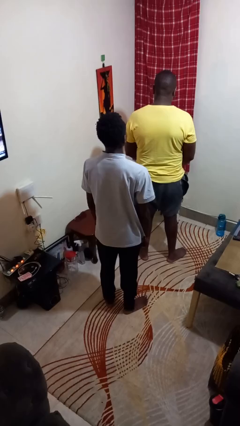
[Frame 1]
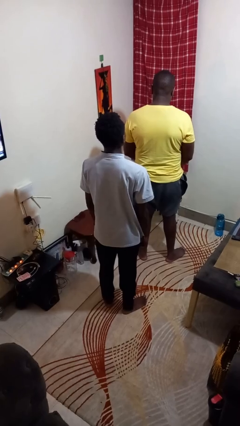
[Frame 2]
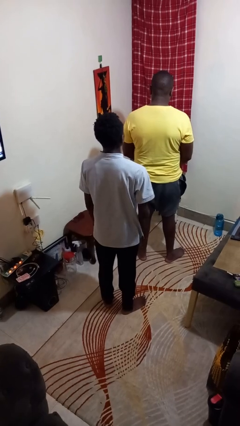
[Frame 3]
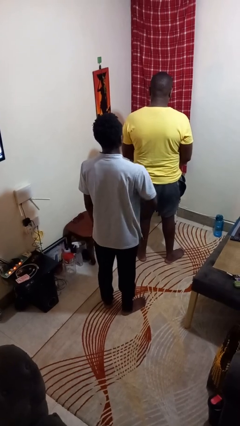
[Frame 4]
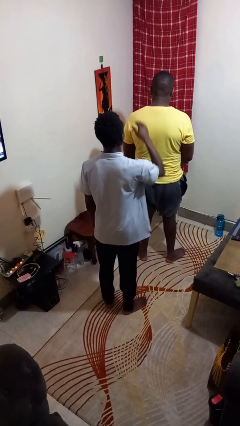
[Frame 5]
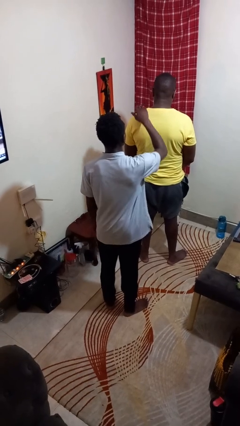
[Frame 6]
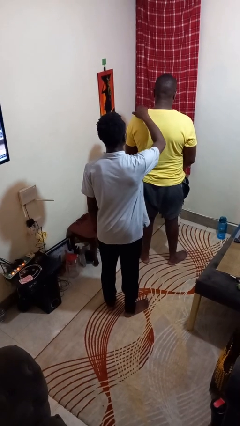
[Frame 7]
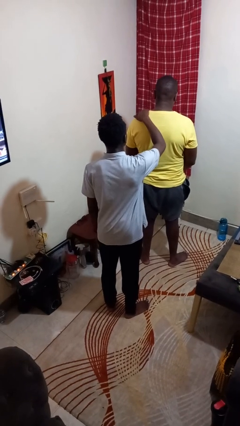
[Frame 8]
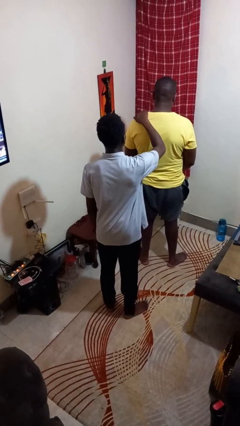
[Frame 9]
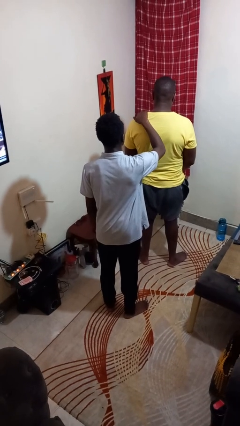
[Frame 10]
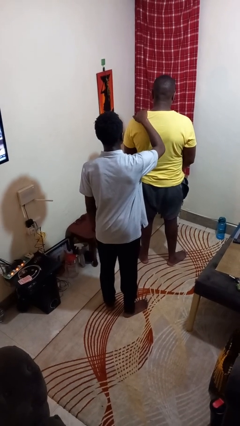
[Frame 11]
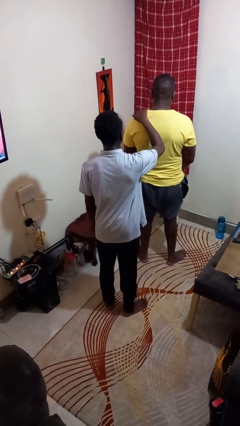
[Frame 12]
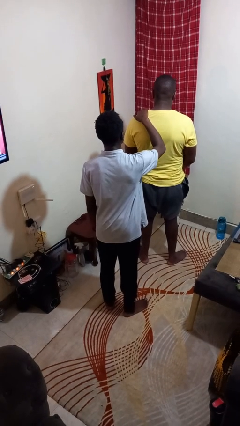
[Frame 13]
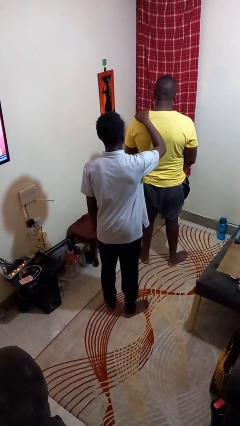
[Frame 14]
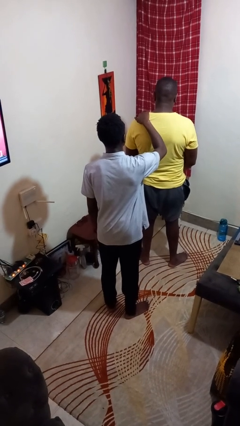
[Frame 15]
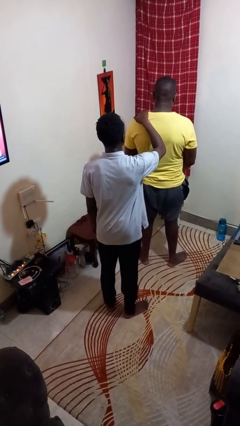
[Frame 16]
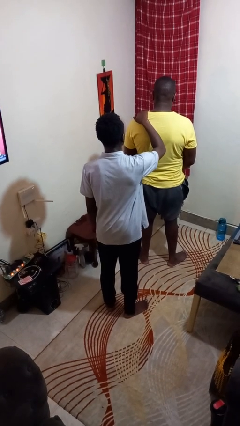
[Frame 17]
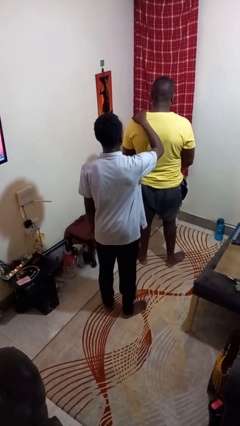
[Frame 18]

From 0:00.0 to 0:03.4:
person touches back of person

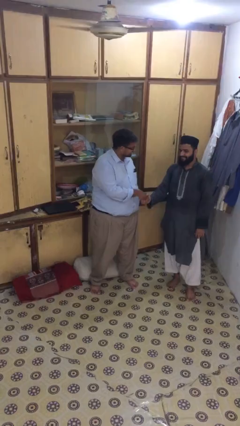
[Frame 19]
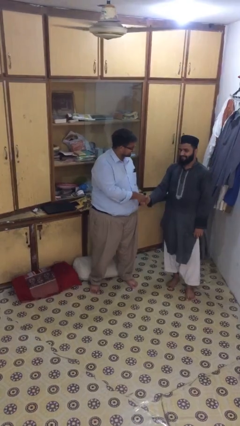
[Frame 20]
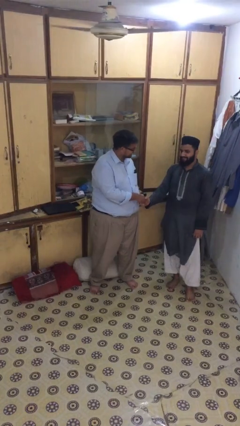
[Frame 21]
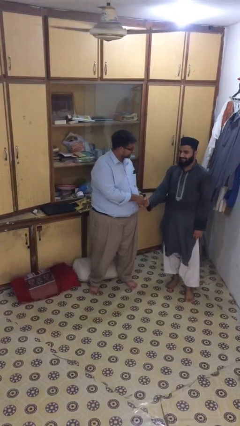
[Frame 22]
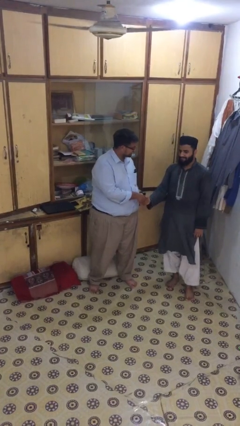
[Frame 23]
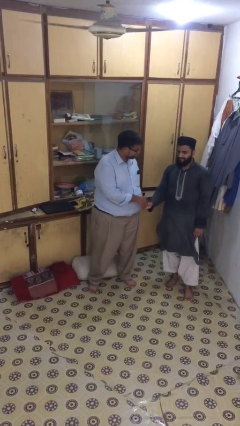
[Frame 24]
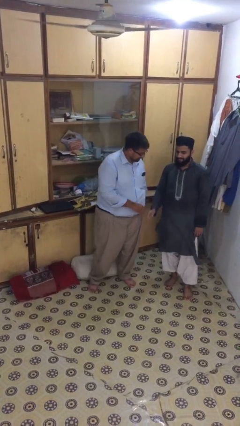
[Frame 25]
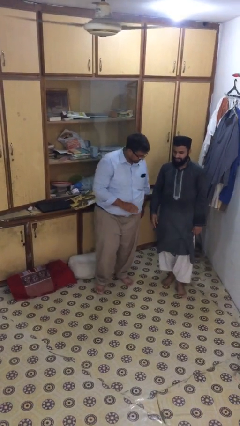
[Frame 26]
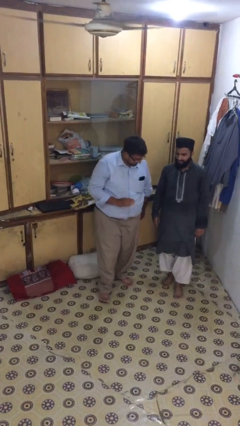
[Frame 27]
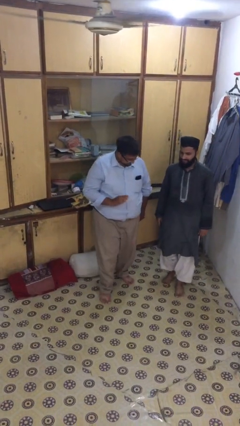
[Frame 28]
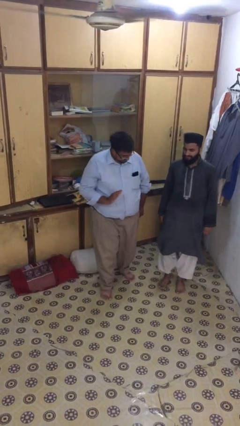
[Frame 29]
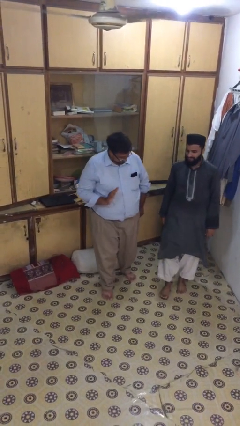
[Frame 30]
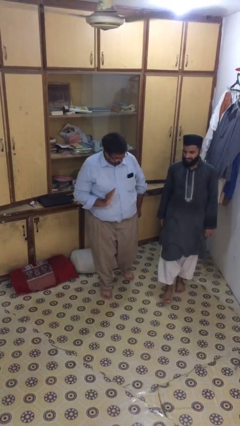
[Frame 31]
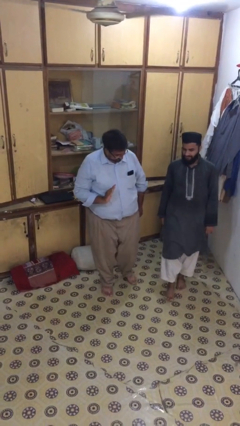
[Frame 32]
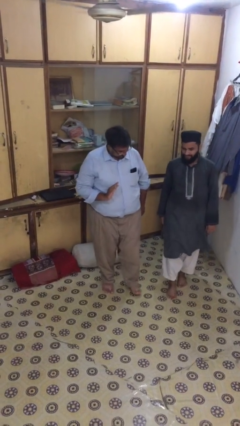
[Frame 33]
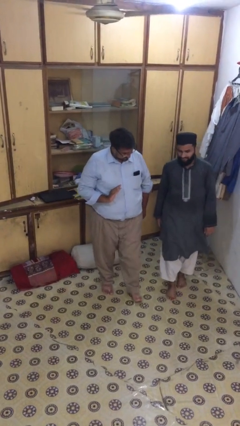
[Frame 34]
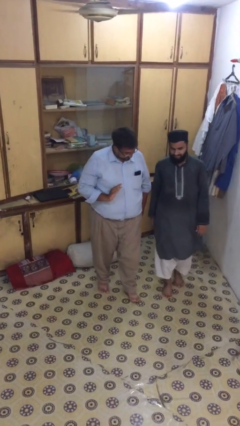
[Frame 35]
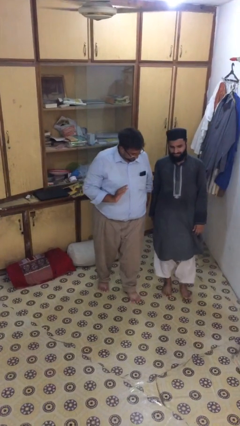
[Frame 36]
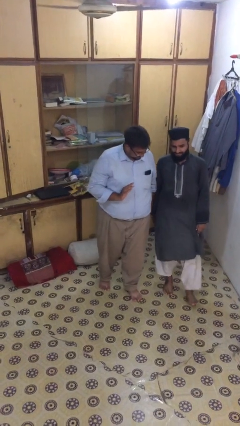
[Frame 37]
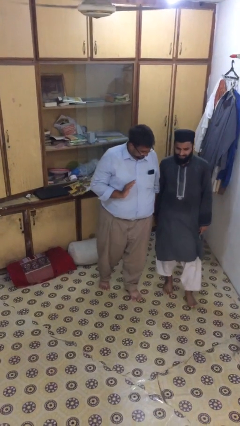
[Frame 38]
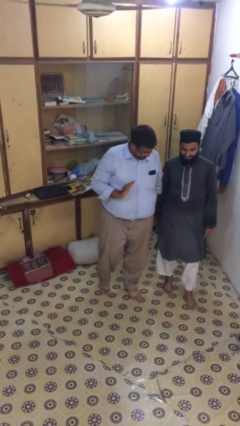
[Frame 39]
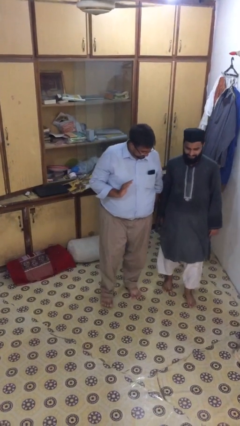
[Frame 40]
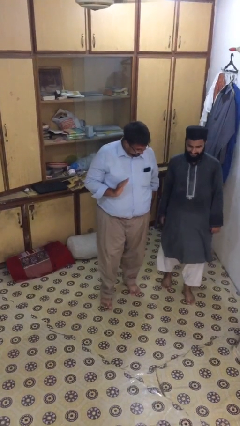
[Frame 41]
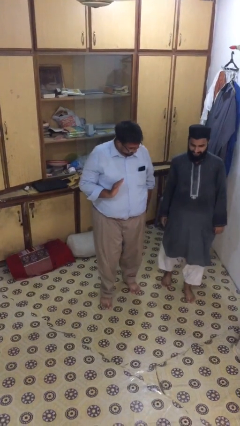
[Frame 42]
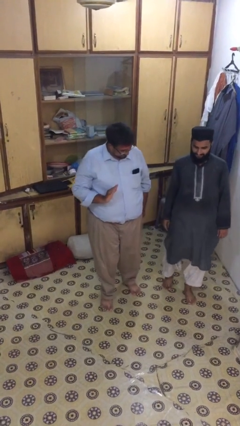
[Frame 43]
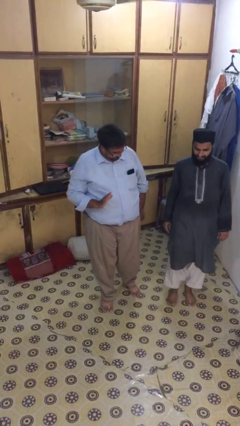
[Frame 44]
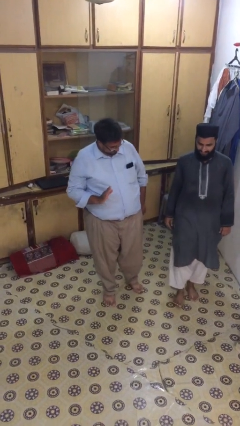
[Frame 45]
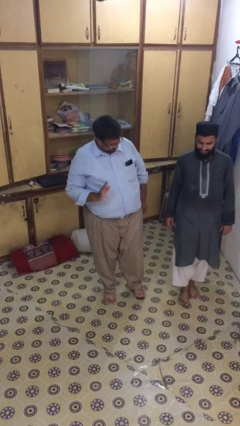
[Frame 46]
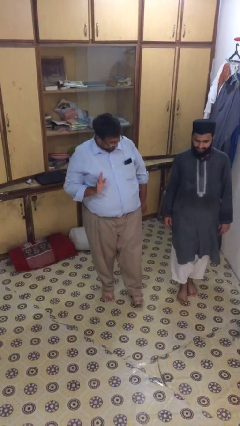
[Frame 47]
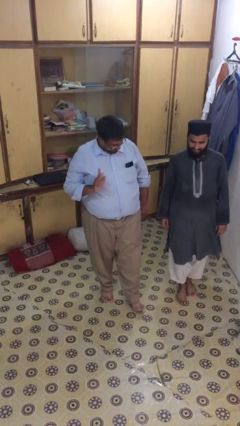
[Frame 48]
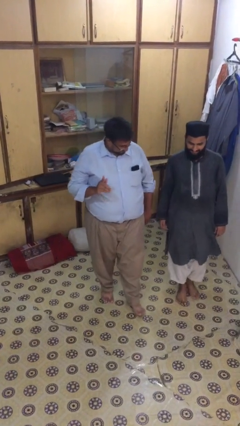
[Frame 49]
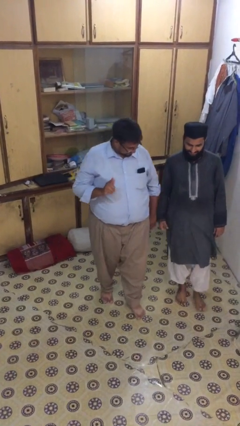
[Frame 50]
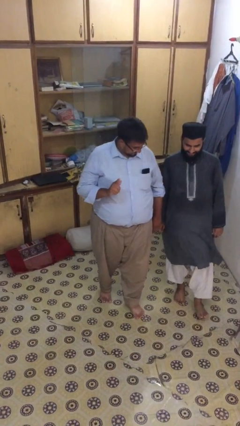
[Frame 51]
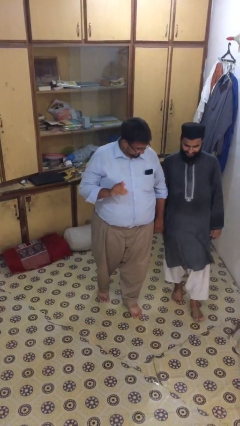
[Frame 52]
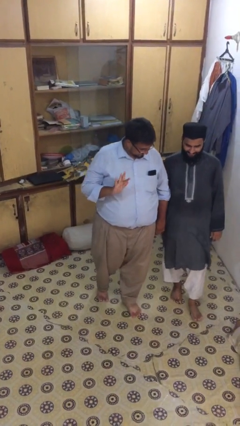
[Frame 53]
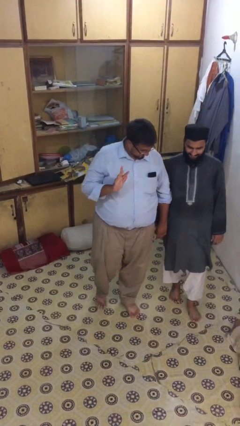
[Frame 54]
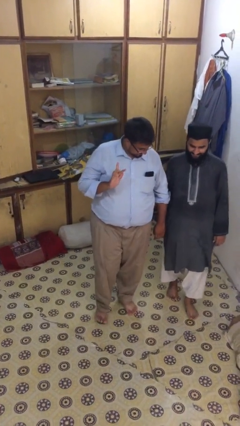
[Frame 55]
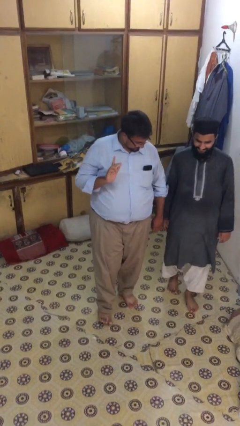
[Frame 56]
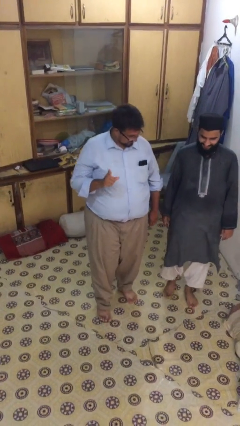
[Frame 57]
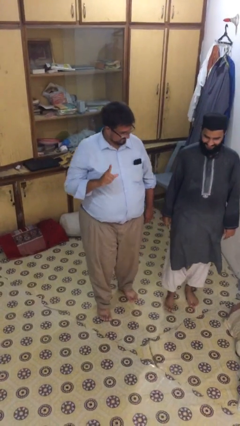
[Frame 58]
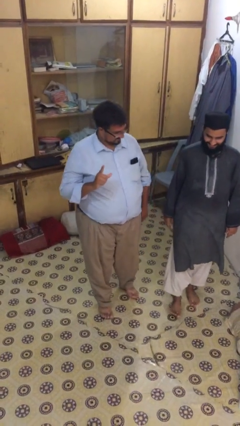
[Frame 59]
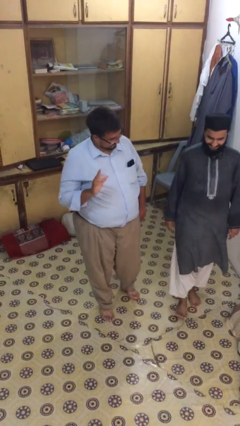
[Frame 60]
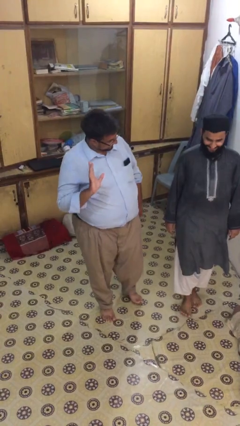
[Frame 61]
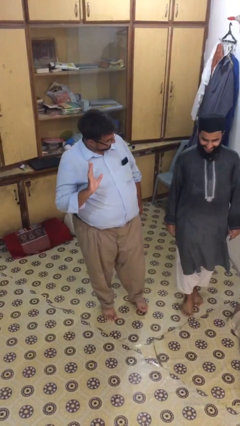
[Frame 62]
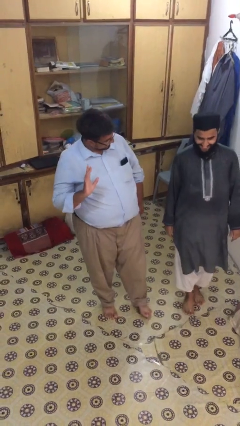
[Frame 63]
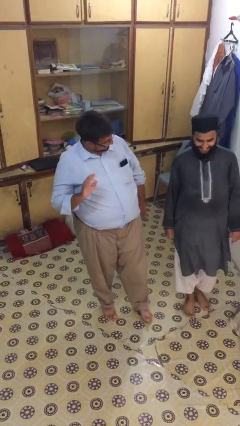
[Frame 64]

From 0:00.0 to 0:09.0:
person talks to person

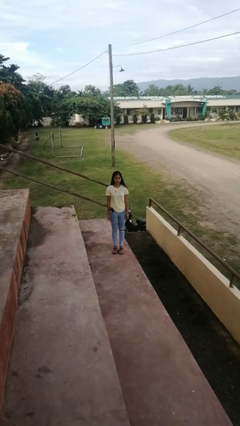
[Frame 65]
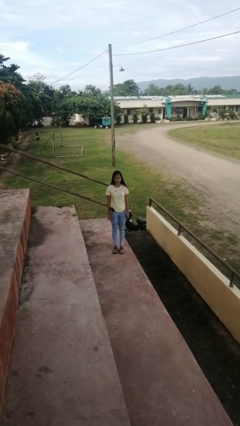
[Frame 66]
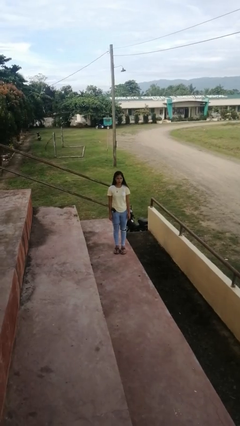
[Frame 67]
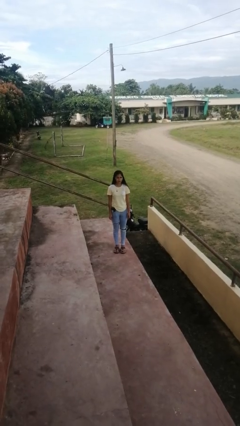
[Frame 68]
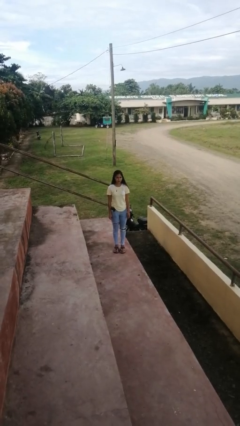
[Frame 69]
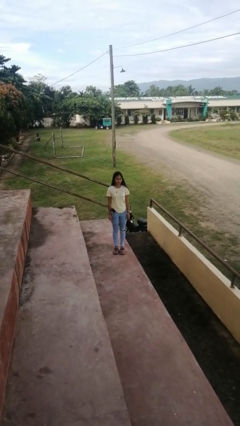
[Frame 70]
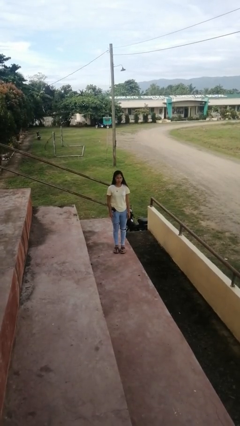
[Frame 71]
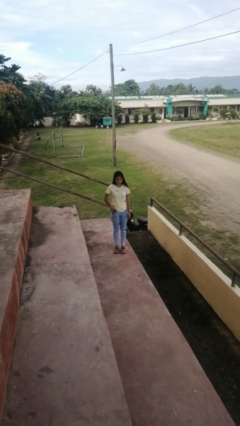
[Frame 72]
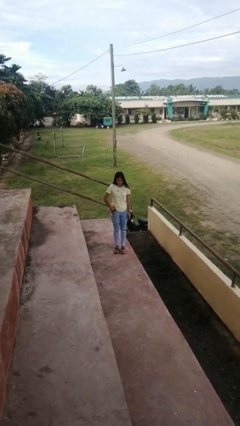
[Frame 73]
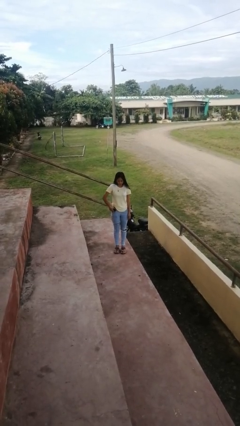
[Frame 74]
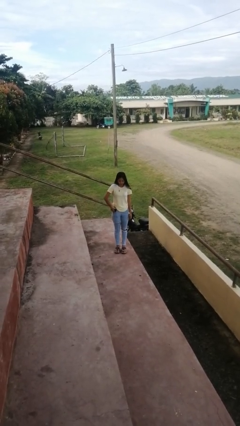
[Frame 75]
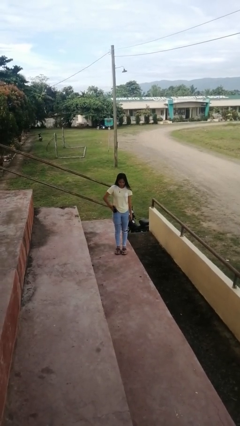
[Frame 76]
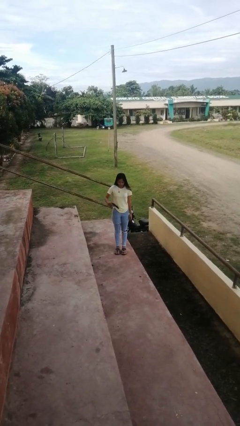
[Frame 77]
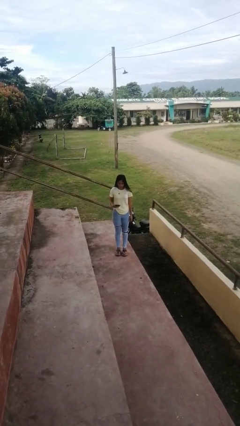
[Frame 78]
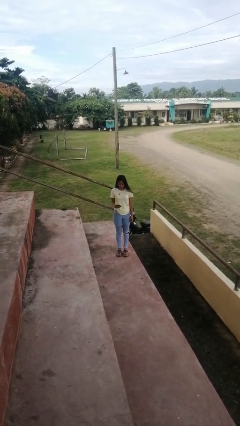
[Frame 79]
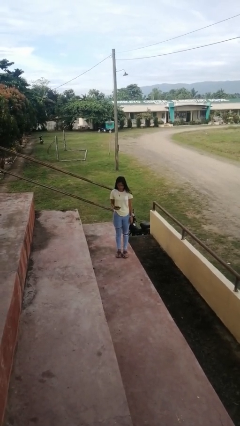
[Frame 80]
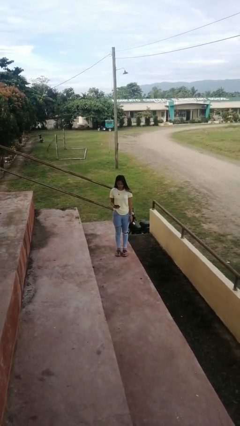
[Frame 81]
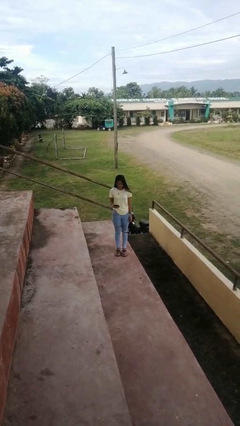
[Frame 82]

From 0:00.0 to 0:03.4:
person takes phone from pocket

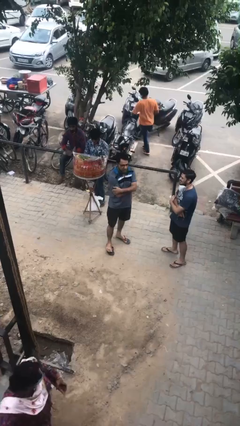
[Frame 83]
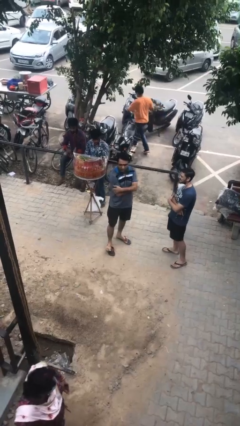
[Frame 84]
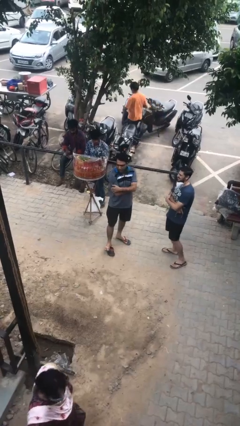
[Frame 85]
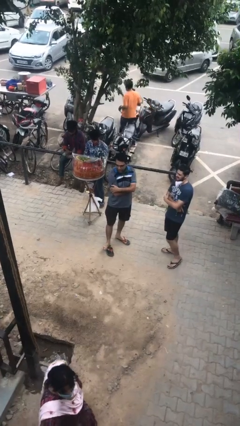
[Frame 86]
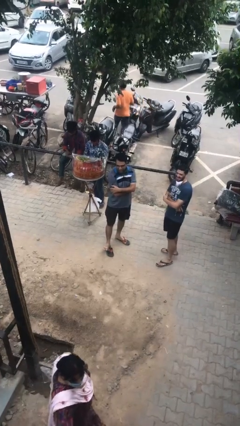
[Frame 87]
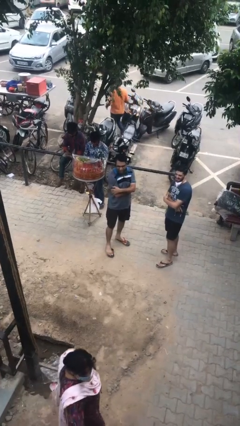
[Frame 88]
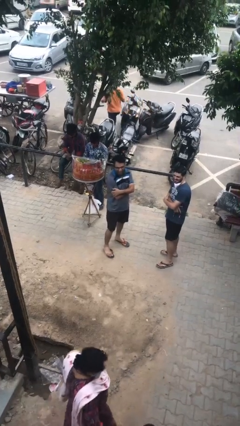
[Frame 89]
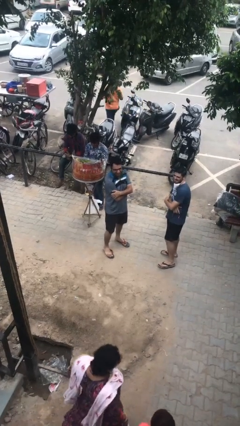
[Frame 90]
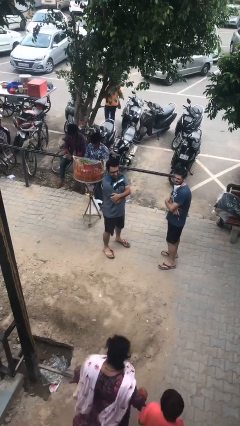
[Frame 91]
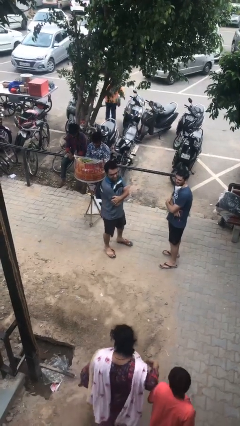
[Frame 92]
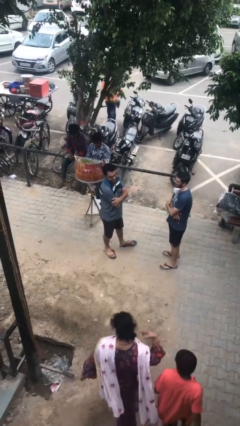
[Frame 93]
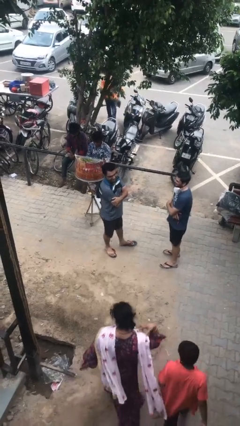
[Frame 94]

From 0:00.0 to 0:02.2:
person laughs with person
